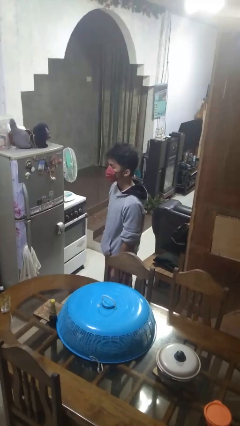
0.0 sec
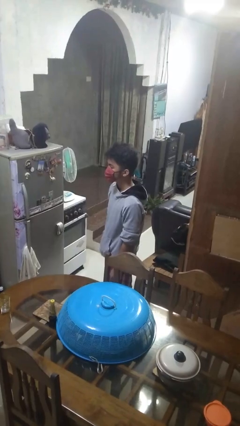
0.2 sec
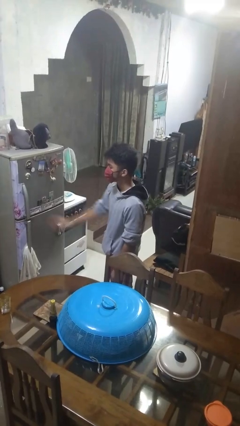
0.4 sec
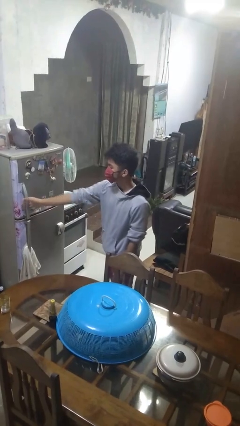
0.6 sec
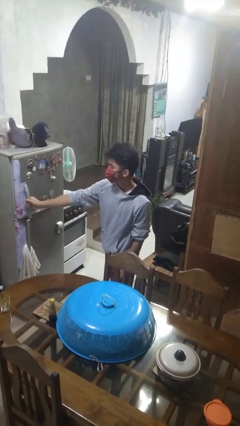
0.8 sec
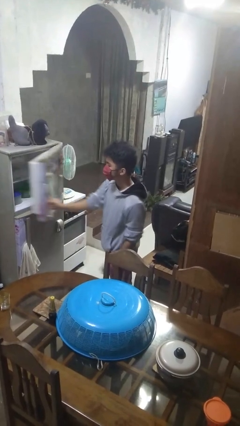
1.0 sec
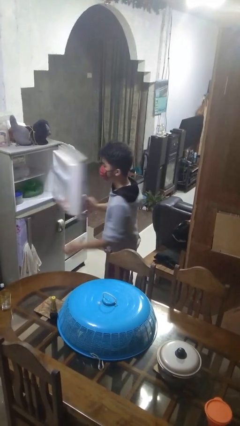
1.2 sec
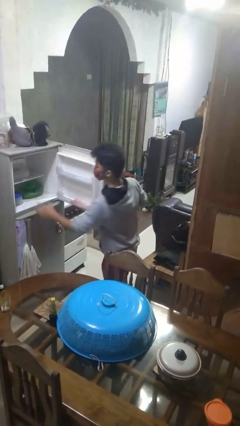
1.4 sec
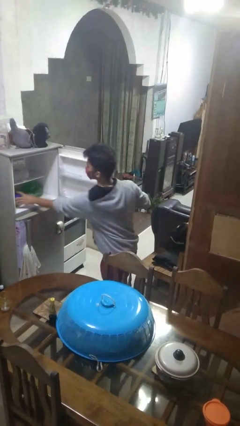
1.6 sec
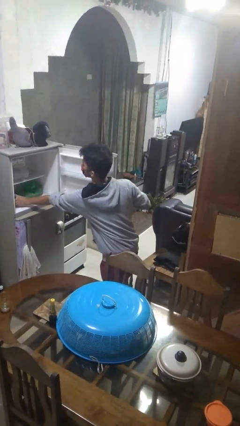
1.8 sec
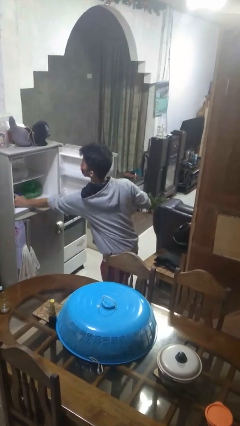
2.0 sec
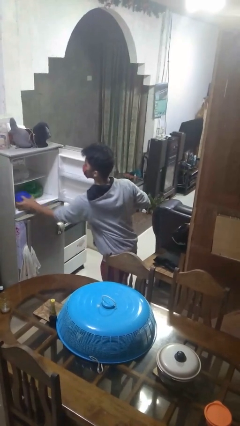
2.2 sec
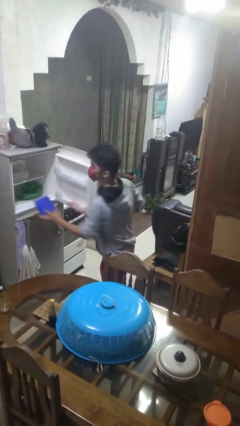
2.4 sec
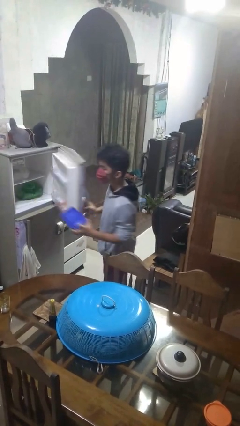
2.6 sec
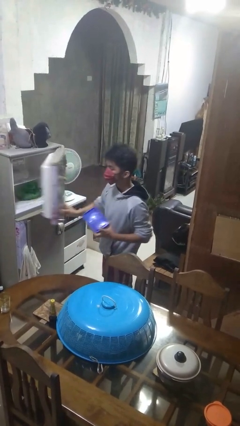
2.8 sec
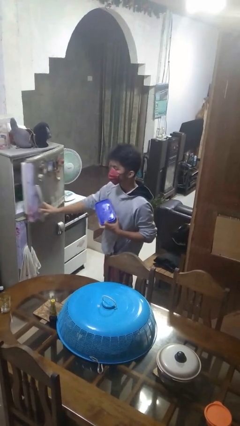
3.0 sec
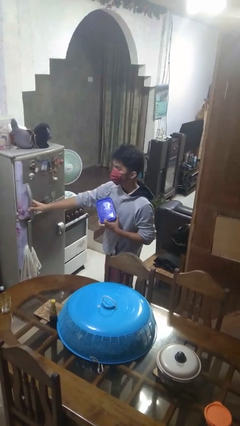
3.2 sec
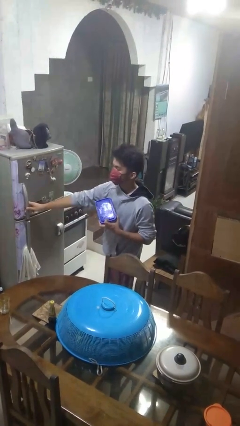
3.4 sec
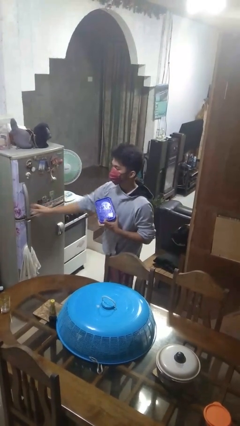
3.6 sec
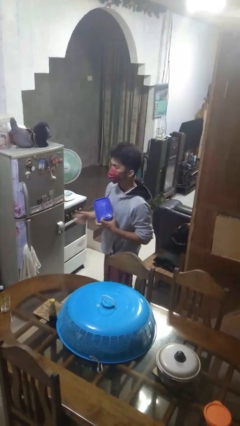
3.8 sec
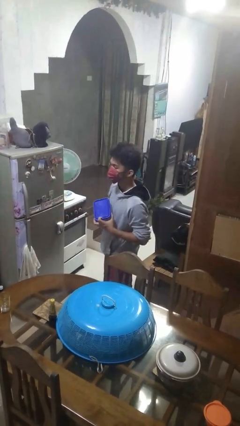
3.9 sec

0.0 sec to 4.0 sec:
person takes object from refrigerator

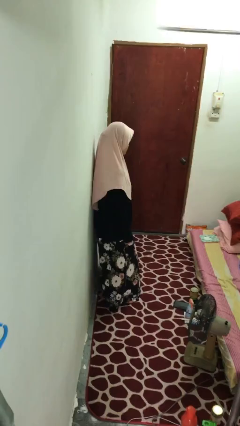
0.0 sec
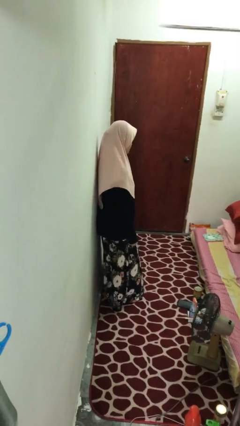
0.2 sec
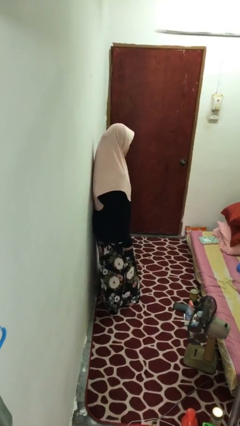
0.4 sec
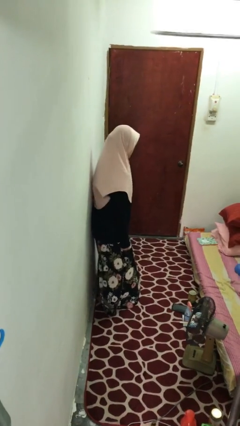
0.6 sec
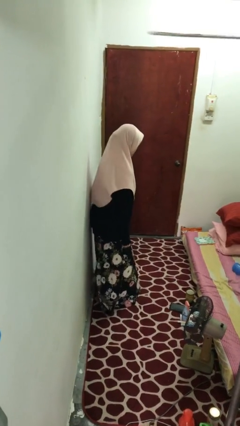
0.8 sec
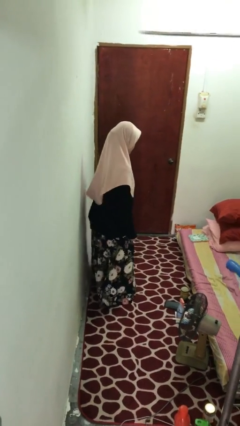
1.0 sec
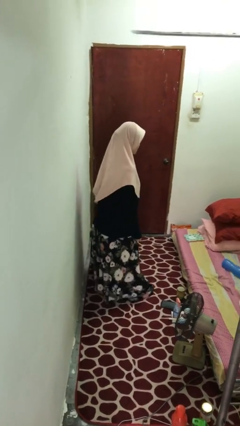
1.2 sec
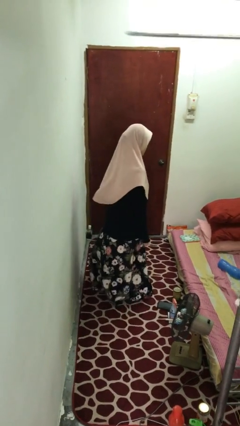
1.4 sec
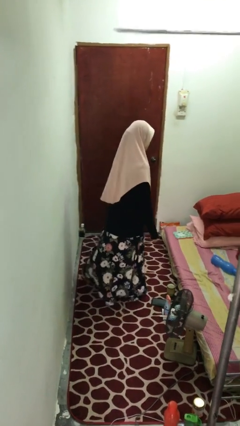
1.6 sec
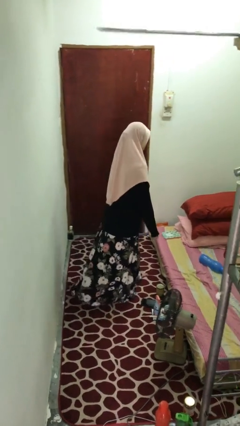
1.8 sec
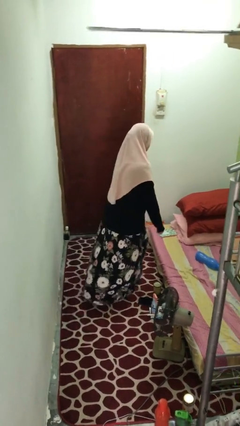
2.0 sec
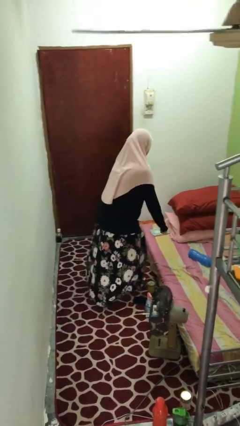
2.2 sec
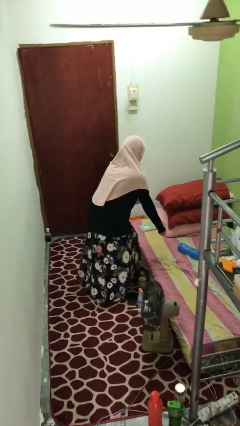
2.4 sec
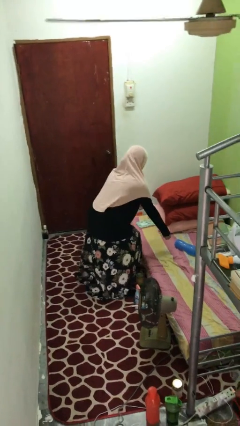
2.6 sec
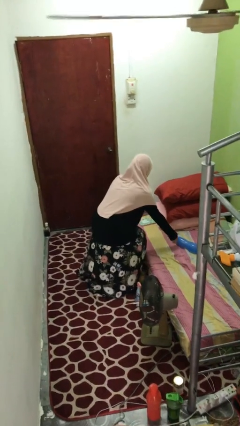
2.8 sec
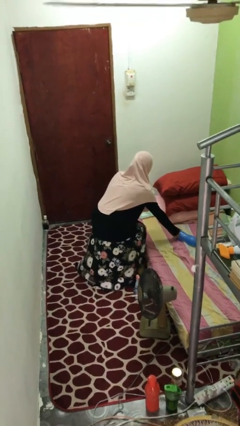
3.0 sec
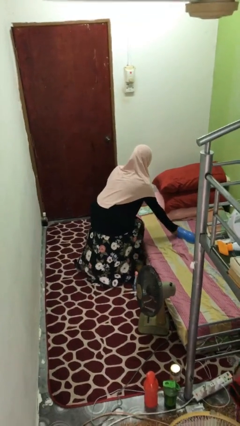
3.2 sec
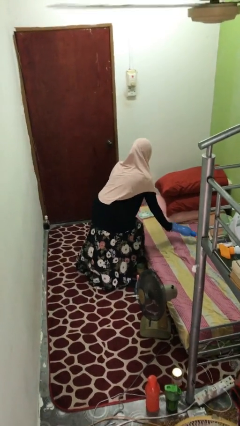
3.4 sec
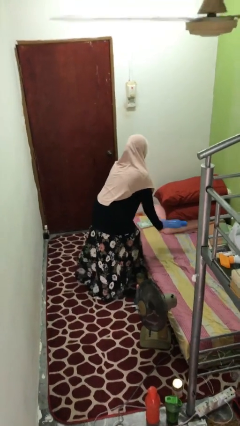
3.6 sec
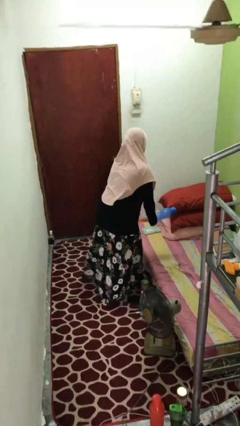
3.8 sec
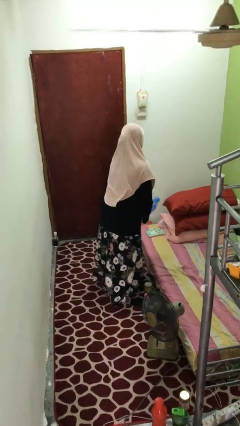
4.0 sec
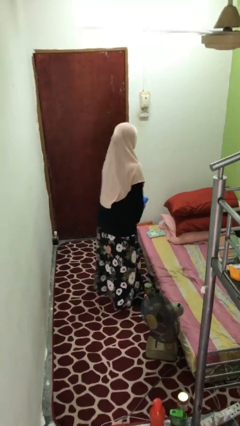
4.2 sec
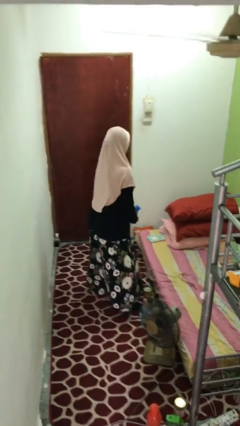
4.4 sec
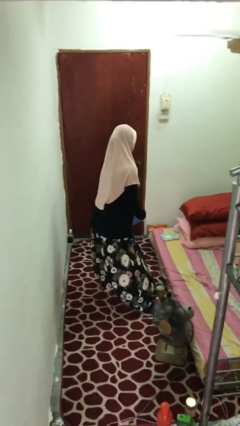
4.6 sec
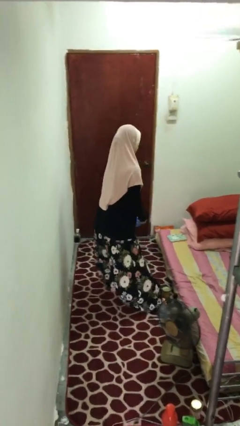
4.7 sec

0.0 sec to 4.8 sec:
person picks up object from bed

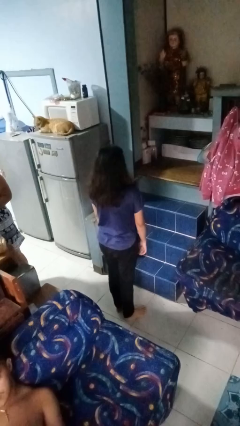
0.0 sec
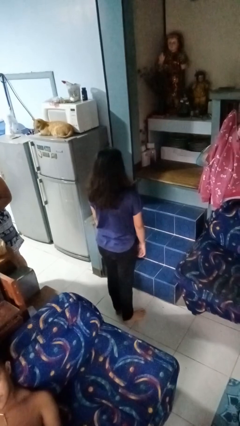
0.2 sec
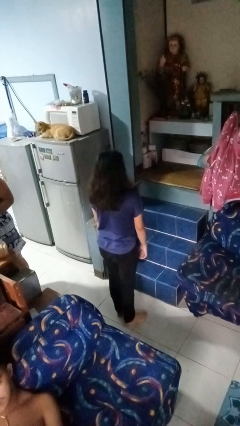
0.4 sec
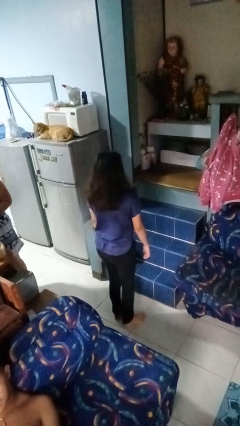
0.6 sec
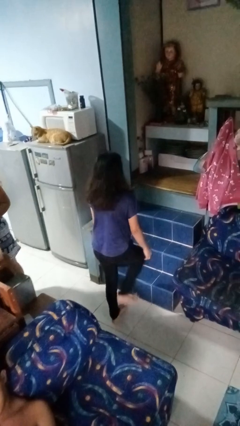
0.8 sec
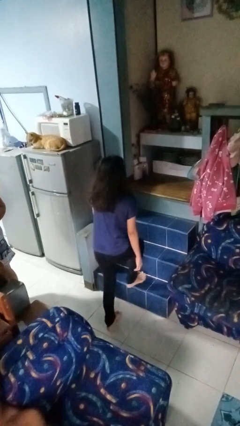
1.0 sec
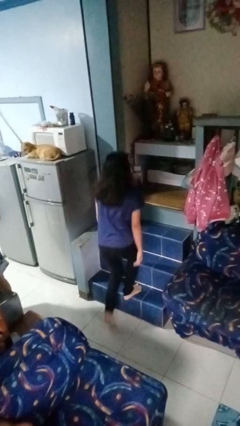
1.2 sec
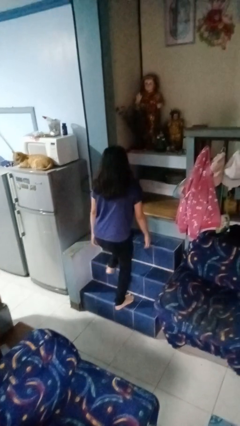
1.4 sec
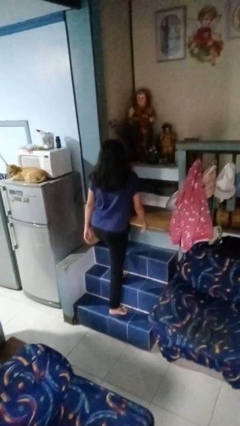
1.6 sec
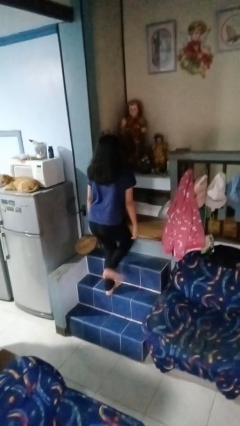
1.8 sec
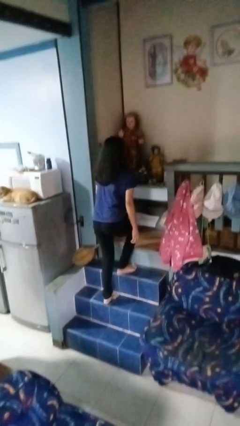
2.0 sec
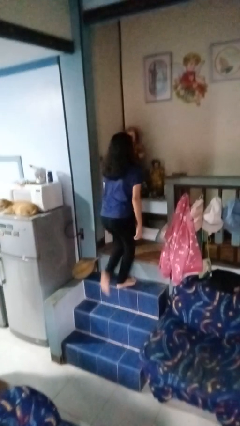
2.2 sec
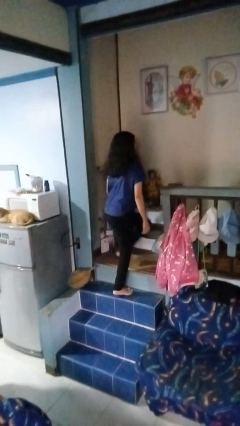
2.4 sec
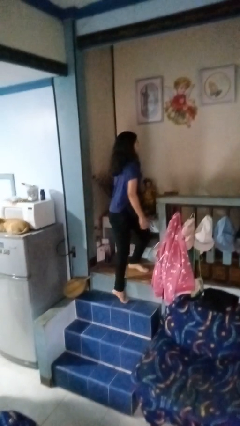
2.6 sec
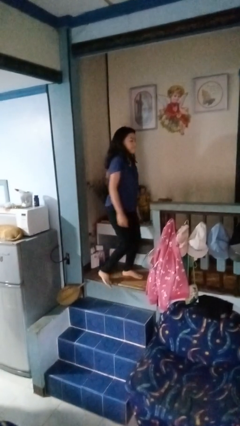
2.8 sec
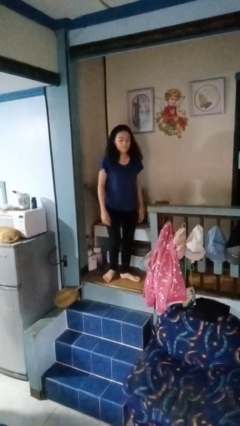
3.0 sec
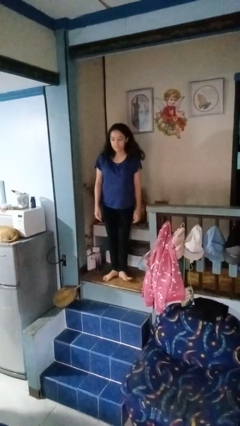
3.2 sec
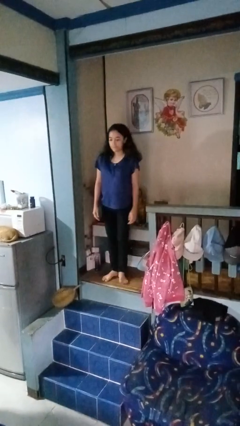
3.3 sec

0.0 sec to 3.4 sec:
person climbs up stairs

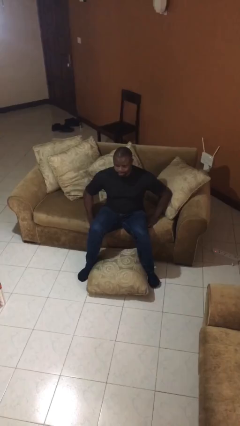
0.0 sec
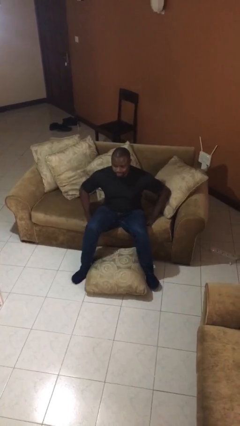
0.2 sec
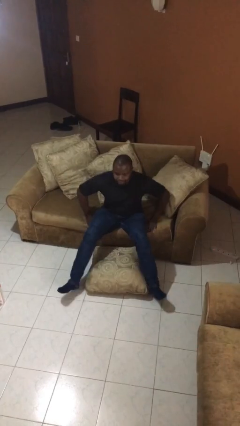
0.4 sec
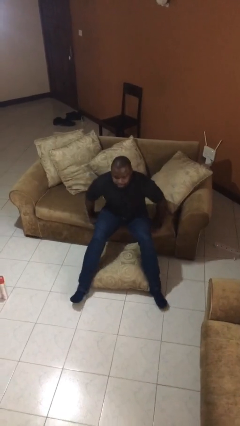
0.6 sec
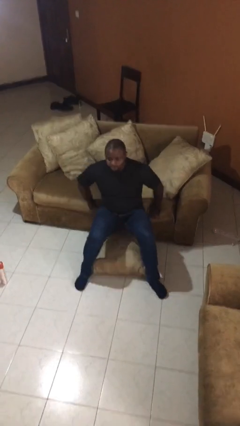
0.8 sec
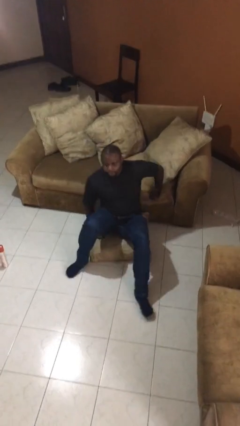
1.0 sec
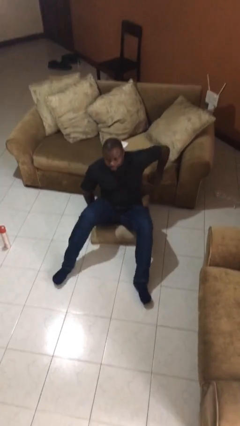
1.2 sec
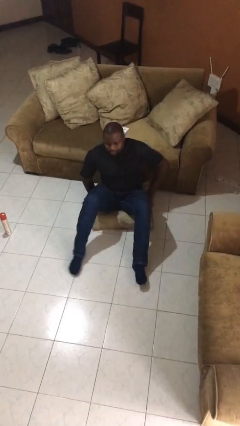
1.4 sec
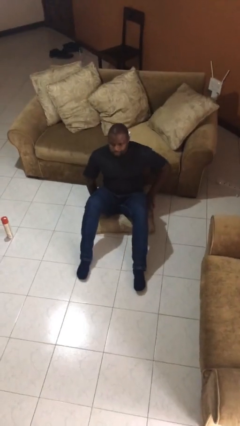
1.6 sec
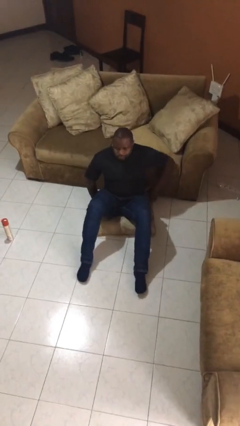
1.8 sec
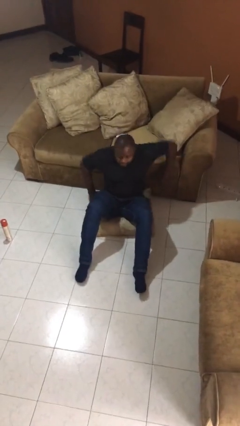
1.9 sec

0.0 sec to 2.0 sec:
person falls from chair

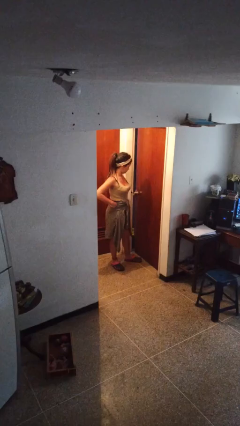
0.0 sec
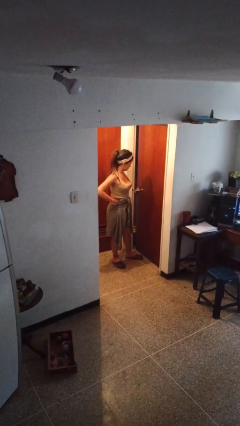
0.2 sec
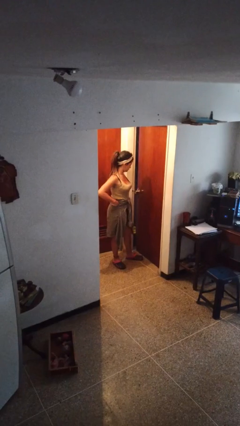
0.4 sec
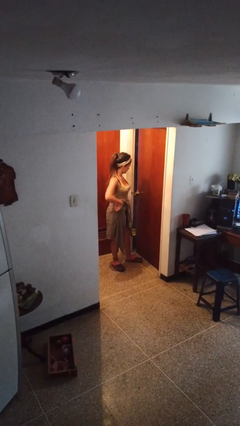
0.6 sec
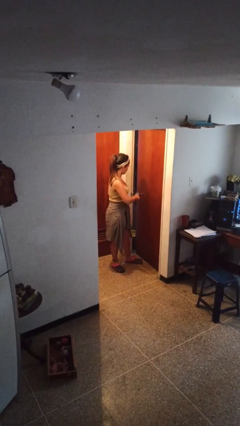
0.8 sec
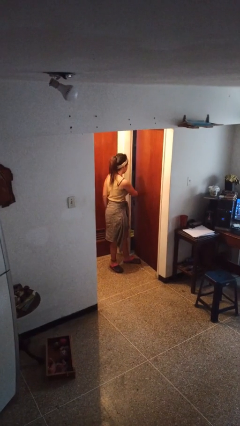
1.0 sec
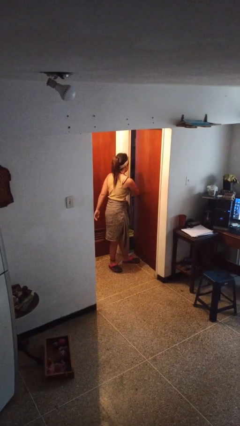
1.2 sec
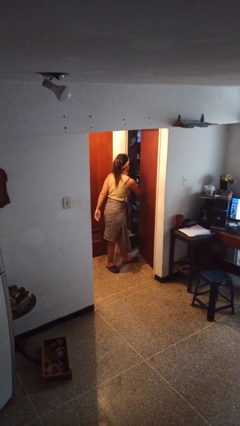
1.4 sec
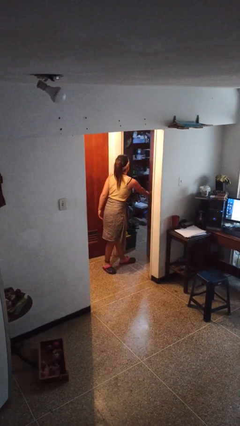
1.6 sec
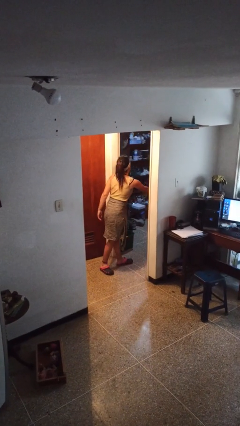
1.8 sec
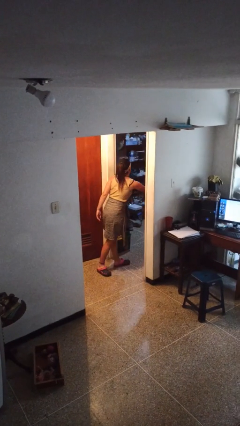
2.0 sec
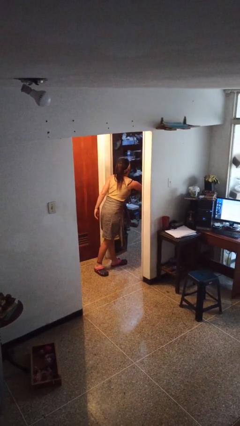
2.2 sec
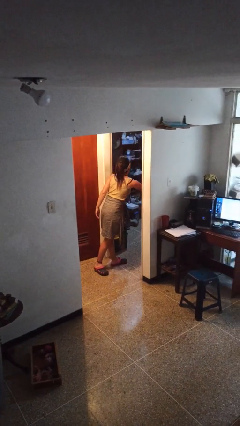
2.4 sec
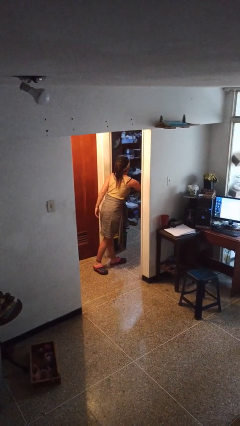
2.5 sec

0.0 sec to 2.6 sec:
person opens facility door

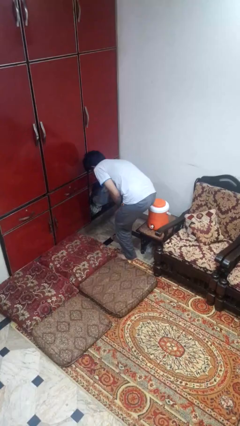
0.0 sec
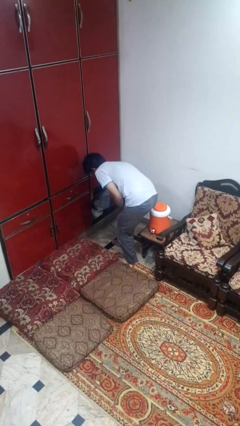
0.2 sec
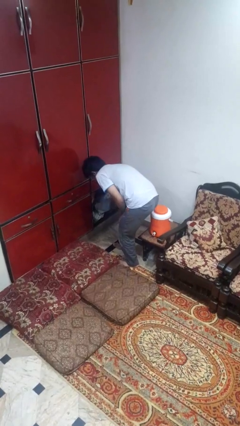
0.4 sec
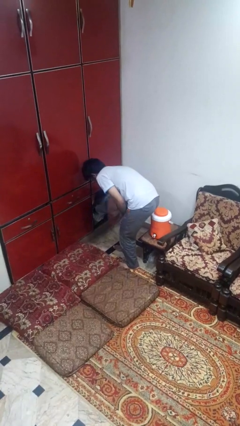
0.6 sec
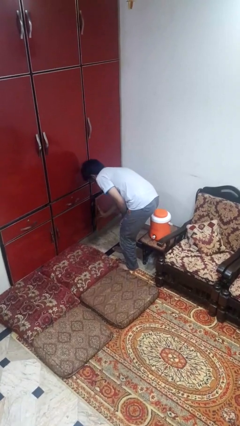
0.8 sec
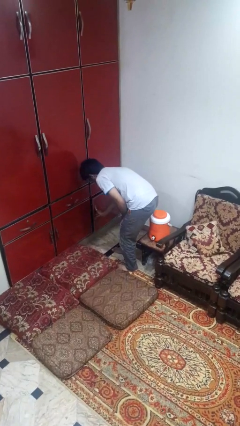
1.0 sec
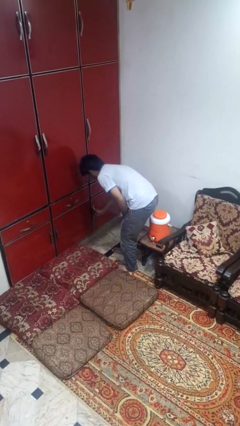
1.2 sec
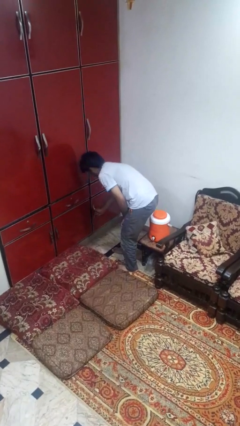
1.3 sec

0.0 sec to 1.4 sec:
person closes cabinet
